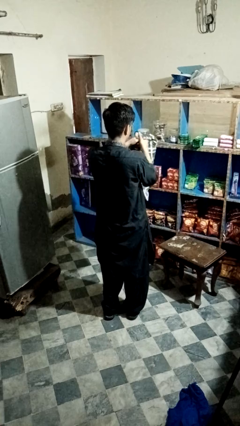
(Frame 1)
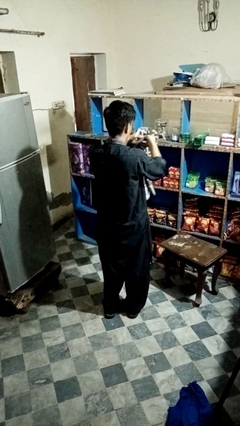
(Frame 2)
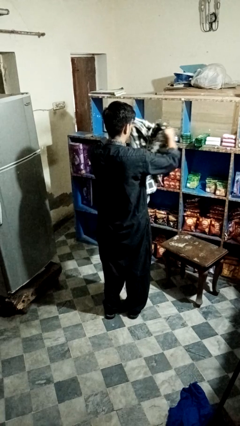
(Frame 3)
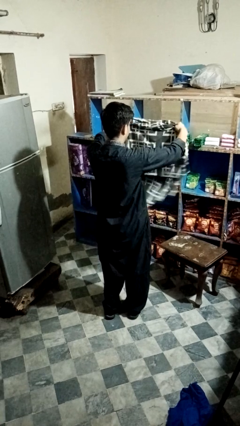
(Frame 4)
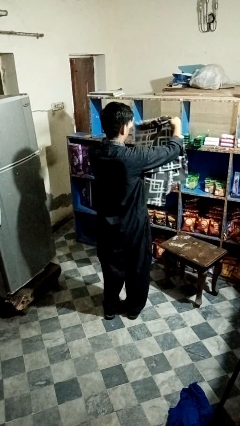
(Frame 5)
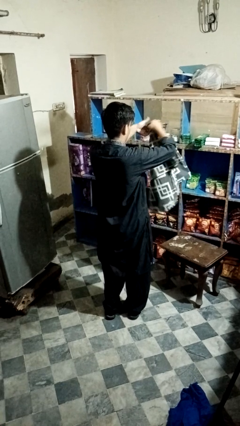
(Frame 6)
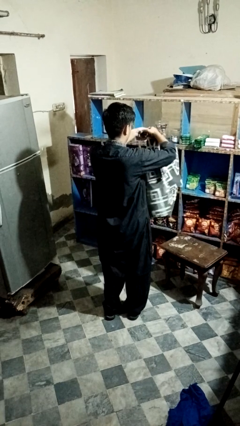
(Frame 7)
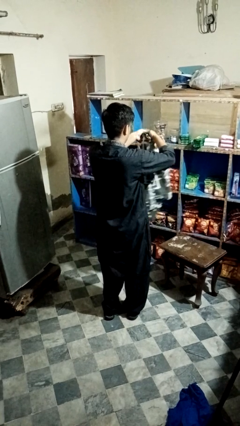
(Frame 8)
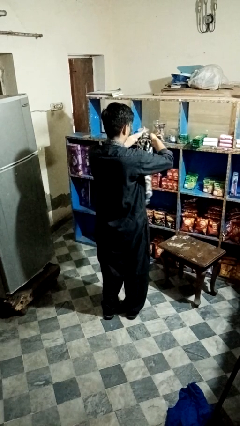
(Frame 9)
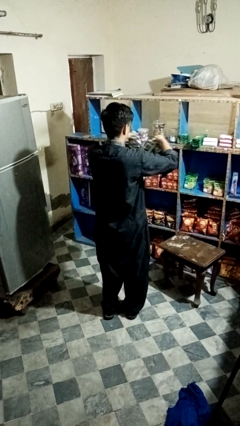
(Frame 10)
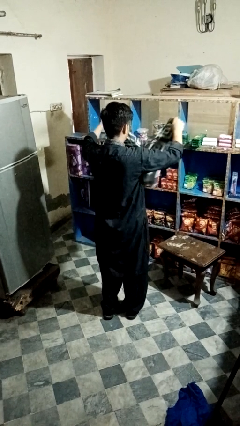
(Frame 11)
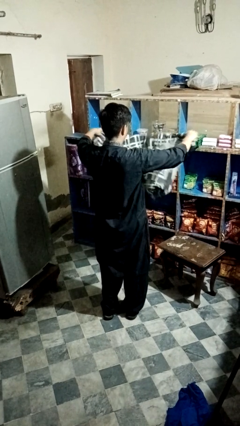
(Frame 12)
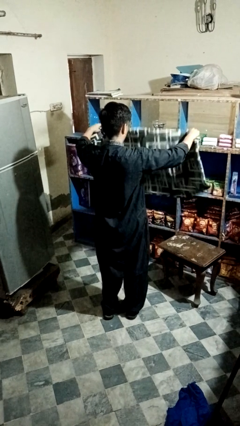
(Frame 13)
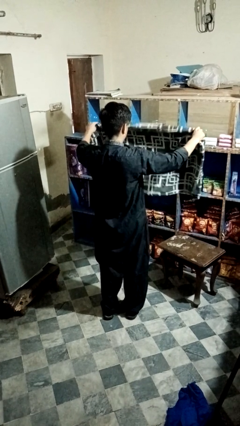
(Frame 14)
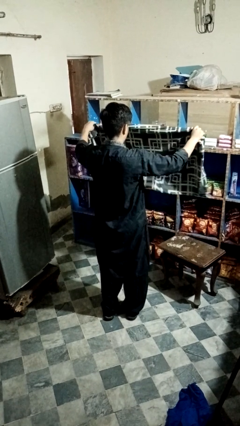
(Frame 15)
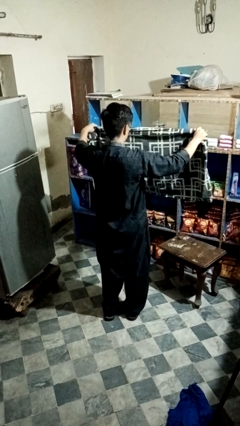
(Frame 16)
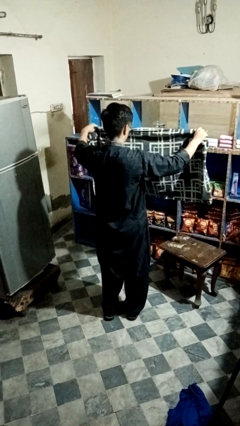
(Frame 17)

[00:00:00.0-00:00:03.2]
person unfolds blanket

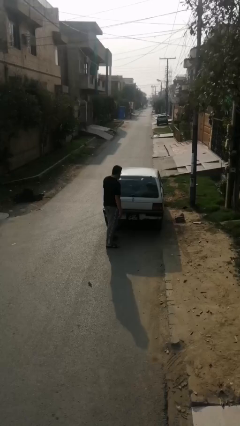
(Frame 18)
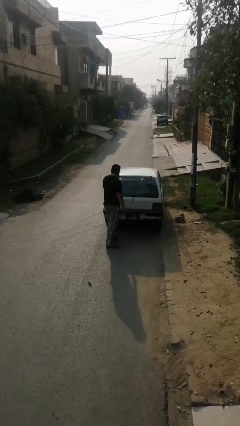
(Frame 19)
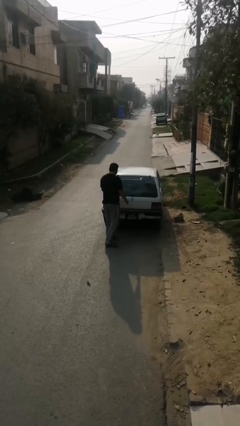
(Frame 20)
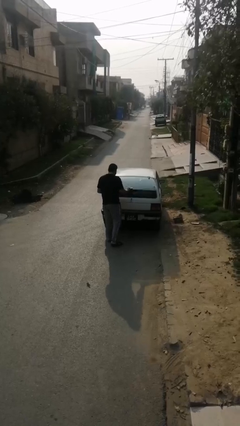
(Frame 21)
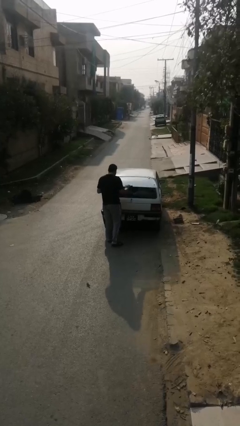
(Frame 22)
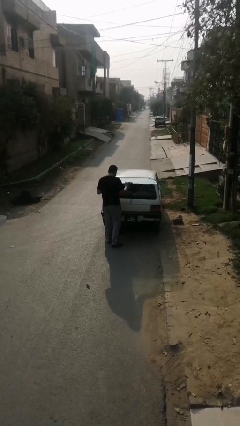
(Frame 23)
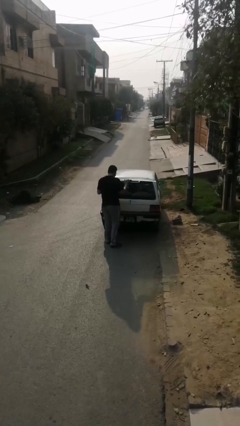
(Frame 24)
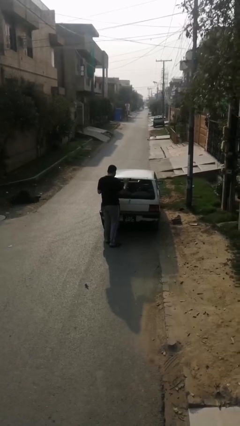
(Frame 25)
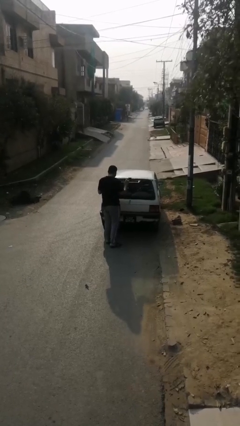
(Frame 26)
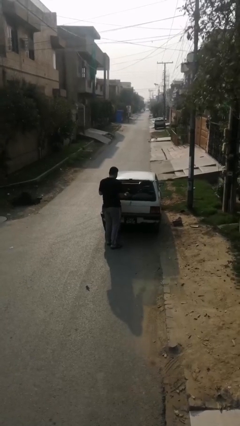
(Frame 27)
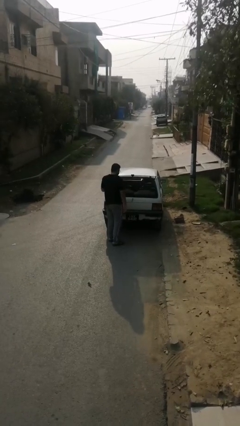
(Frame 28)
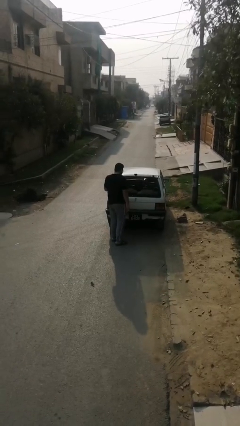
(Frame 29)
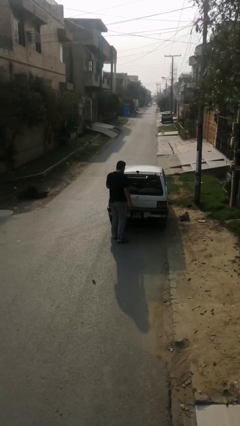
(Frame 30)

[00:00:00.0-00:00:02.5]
person opens car trunk

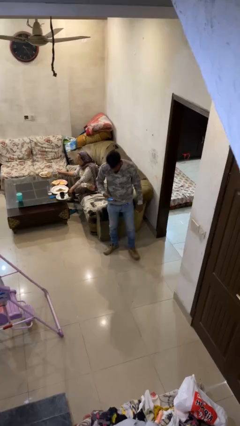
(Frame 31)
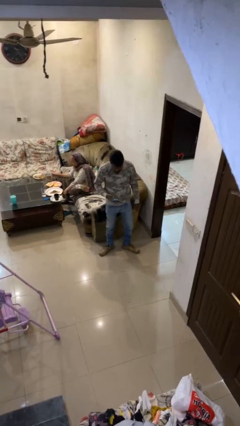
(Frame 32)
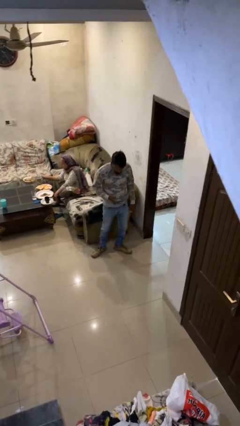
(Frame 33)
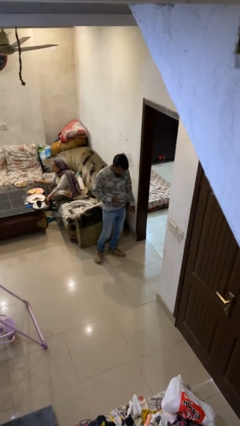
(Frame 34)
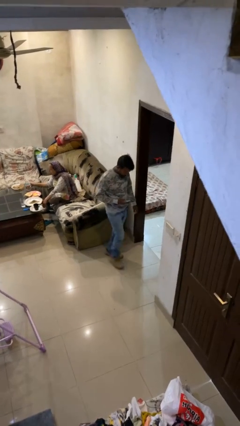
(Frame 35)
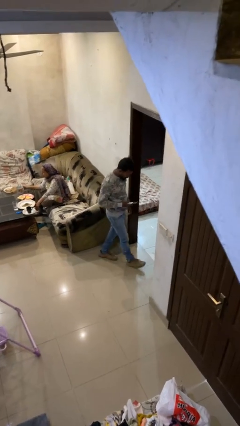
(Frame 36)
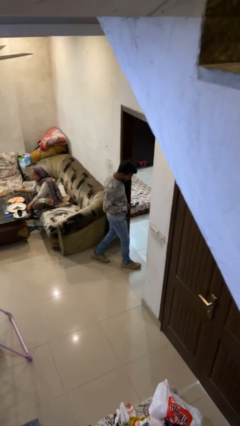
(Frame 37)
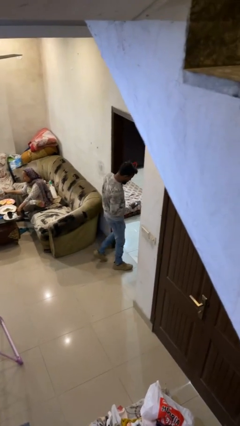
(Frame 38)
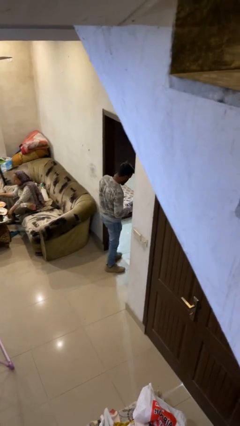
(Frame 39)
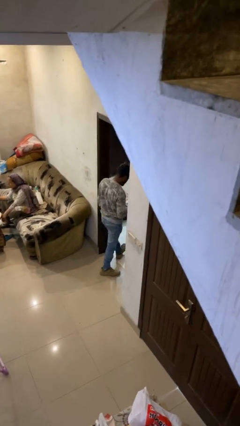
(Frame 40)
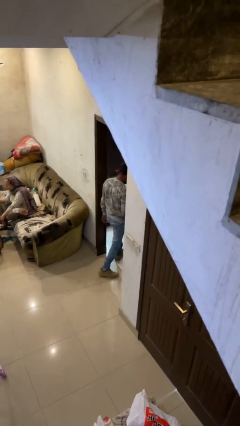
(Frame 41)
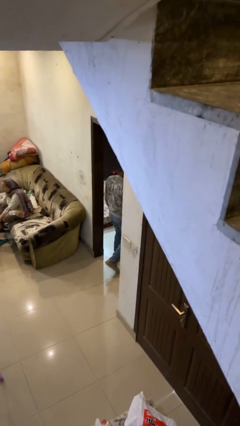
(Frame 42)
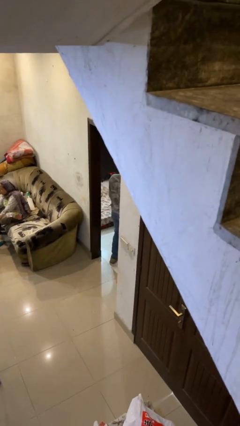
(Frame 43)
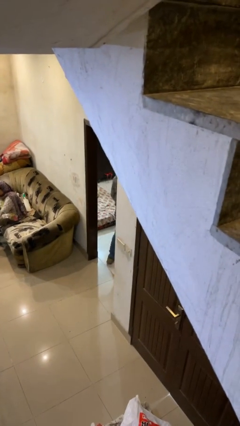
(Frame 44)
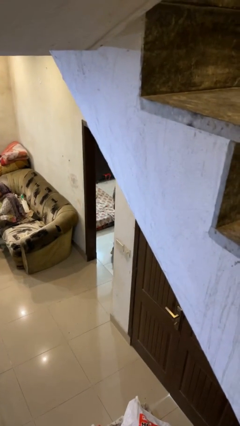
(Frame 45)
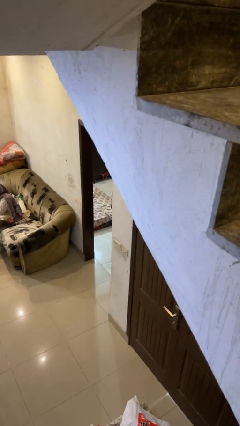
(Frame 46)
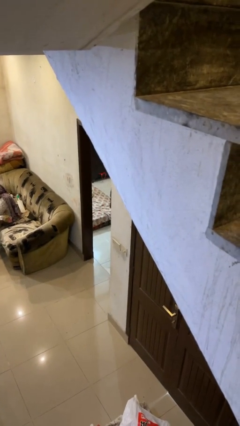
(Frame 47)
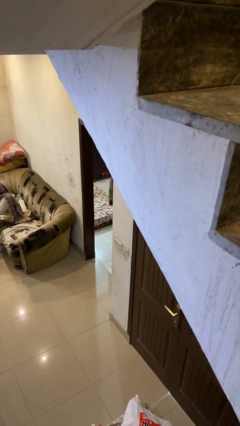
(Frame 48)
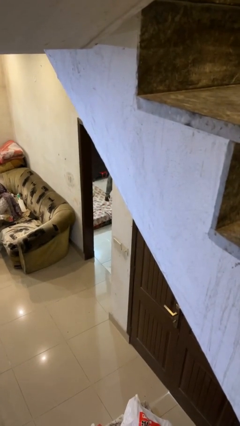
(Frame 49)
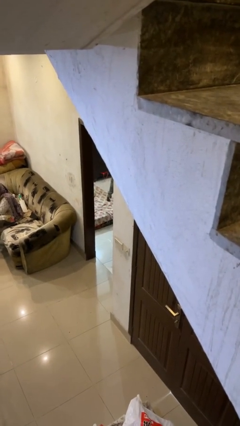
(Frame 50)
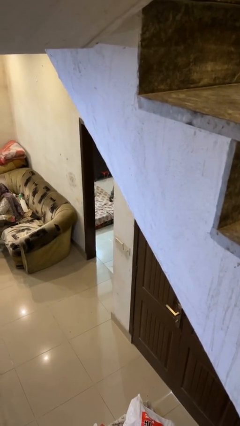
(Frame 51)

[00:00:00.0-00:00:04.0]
person exits scene through structure

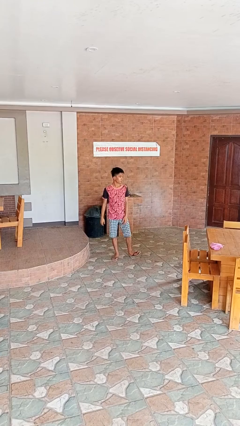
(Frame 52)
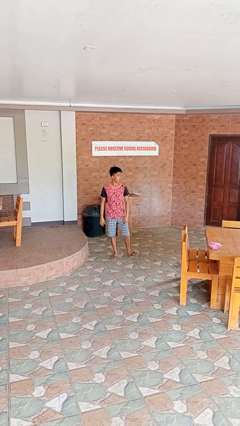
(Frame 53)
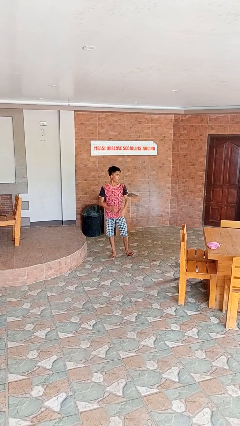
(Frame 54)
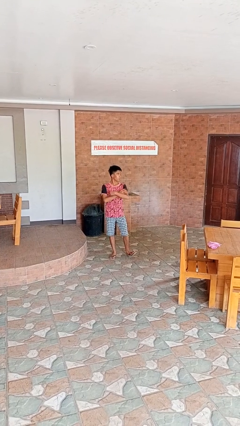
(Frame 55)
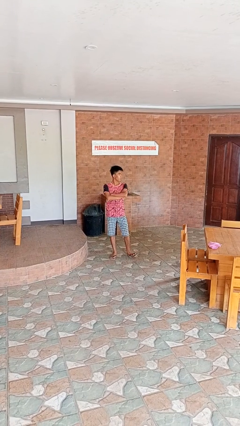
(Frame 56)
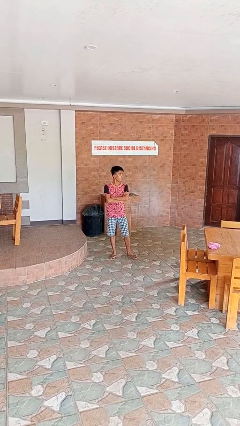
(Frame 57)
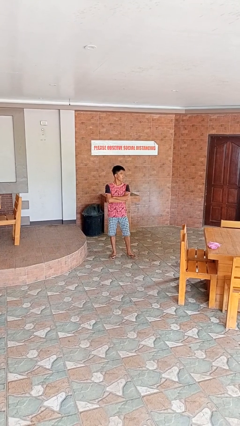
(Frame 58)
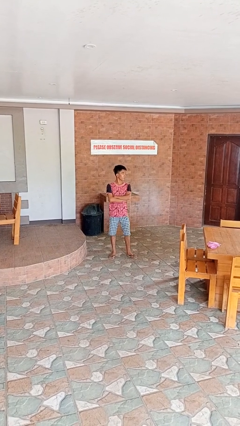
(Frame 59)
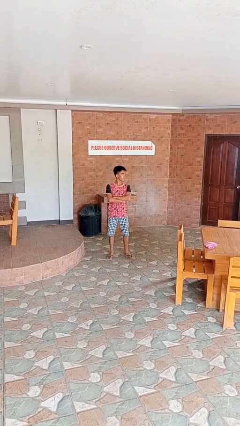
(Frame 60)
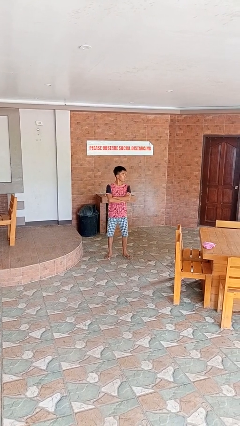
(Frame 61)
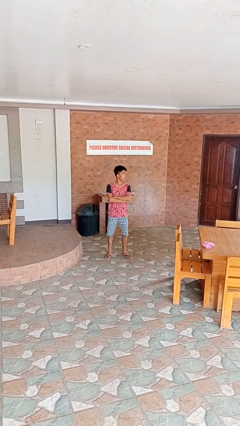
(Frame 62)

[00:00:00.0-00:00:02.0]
person crosses arms

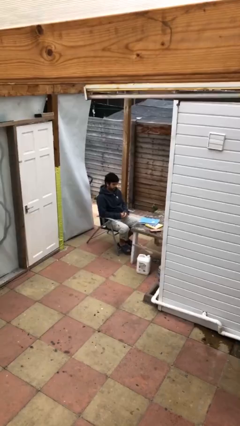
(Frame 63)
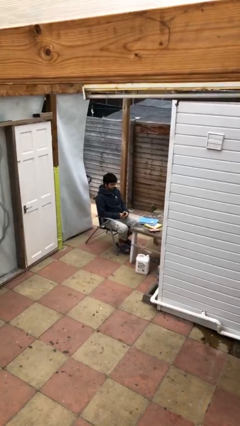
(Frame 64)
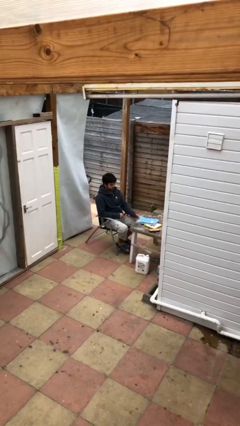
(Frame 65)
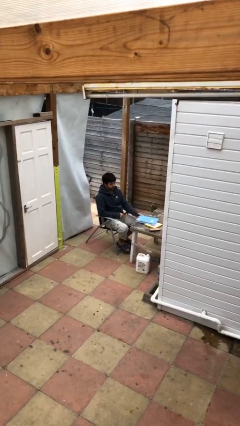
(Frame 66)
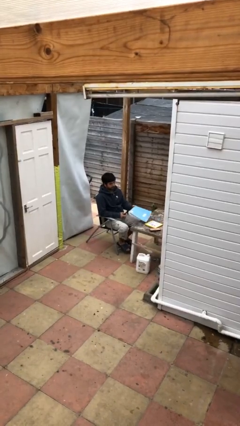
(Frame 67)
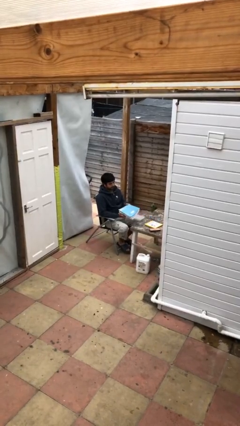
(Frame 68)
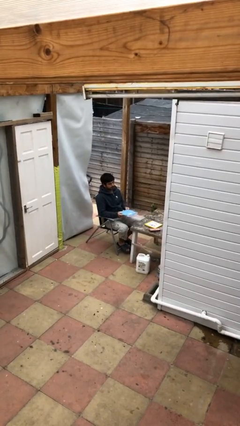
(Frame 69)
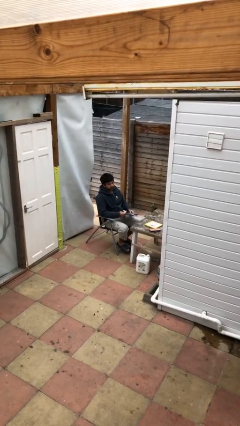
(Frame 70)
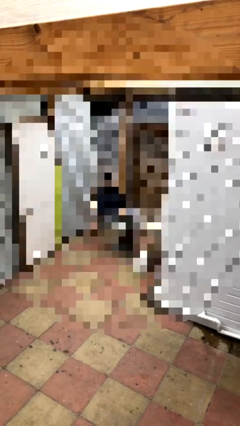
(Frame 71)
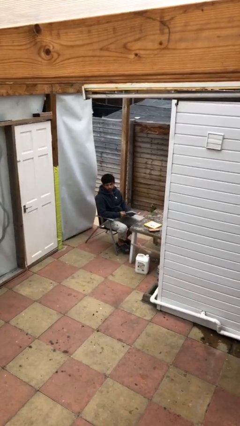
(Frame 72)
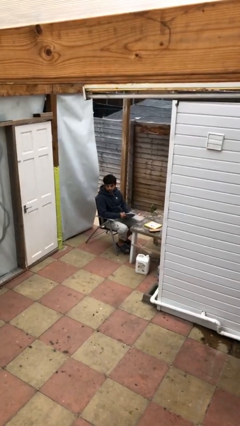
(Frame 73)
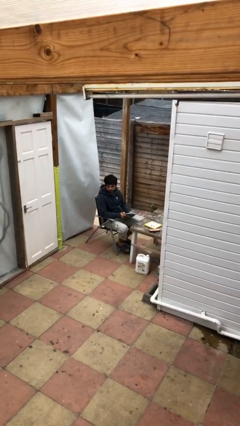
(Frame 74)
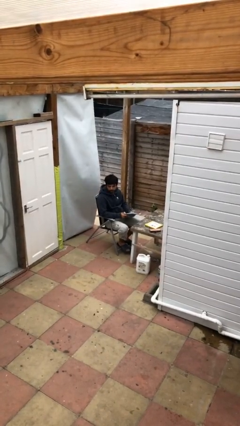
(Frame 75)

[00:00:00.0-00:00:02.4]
person picks up object from table

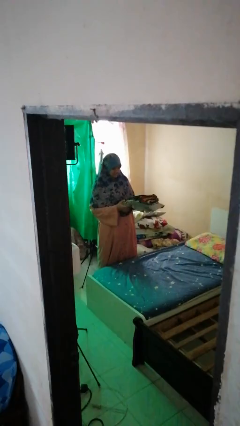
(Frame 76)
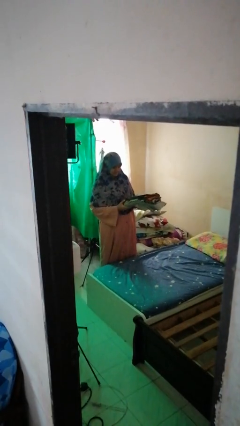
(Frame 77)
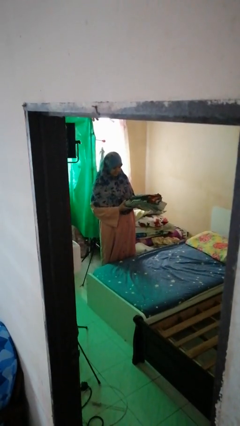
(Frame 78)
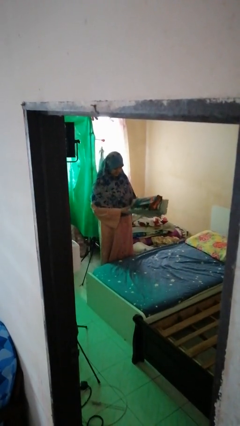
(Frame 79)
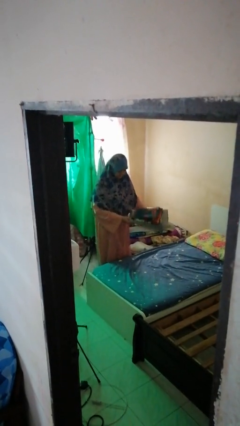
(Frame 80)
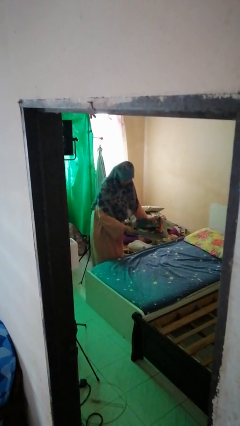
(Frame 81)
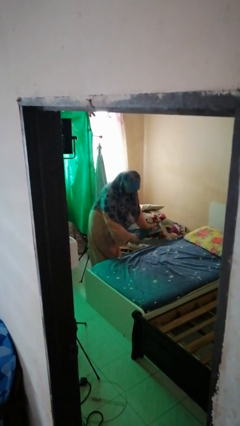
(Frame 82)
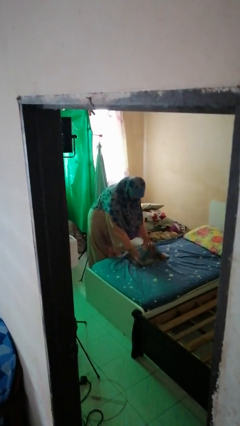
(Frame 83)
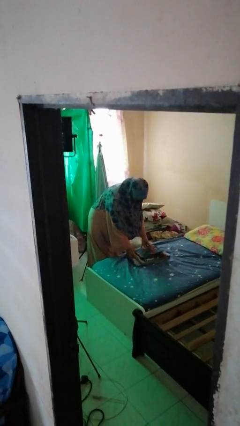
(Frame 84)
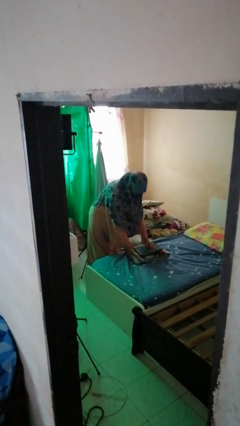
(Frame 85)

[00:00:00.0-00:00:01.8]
person puts down object on bed

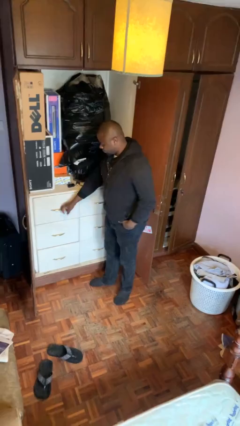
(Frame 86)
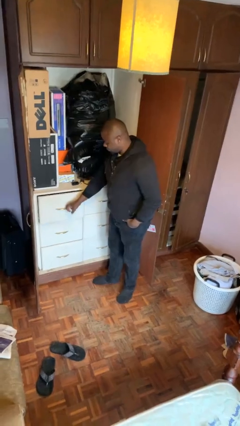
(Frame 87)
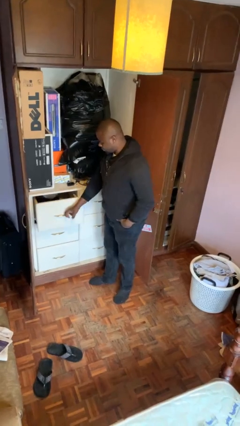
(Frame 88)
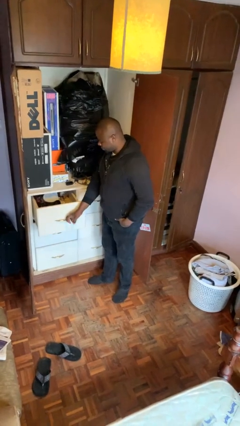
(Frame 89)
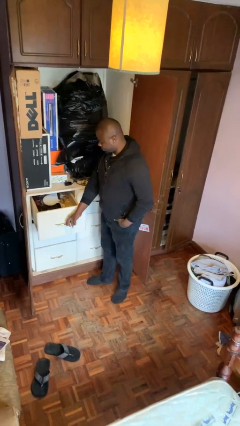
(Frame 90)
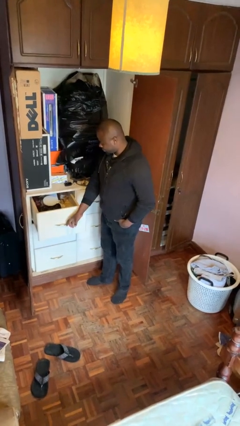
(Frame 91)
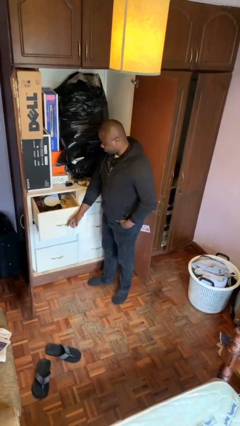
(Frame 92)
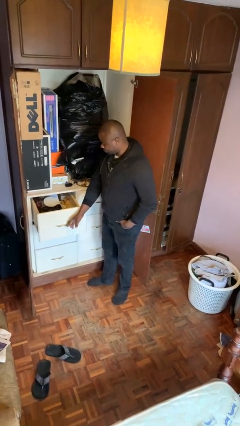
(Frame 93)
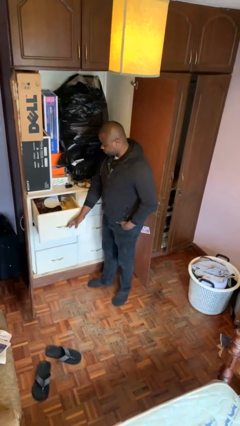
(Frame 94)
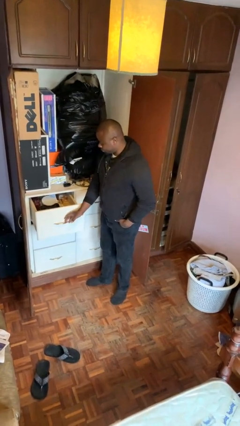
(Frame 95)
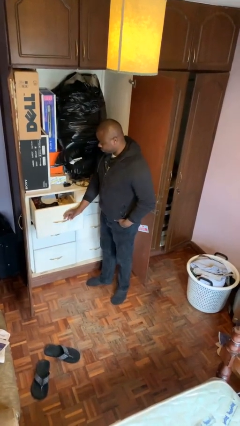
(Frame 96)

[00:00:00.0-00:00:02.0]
person opens dresser drawer
